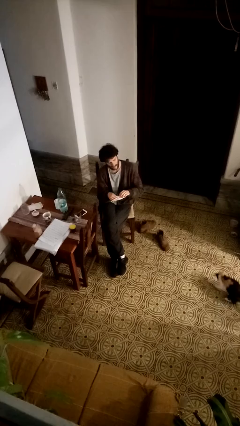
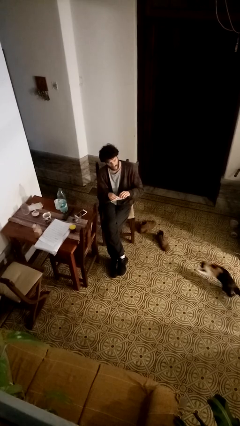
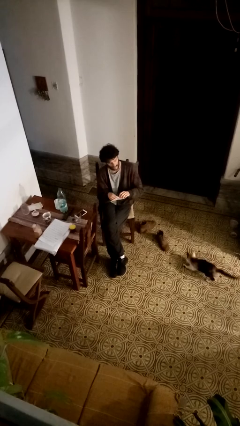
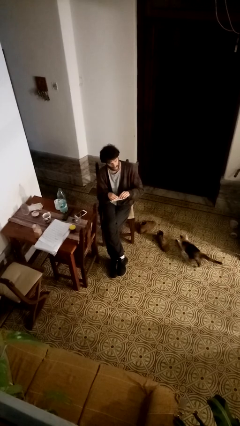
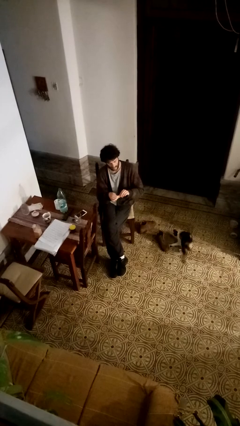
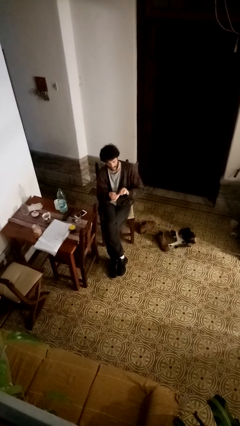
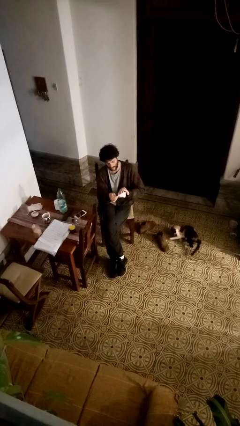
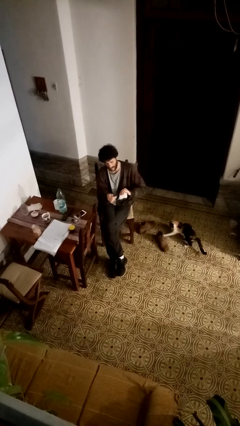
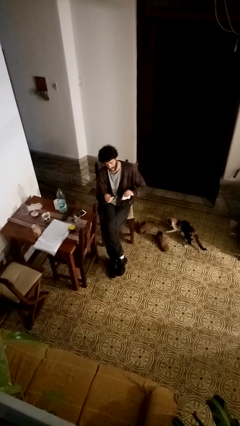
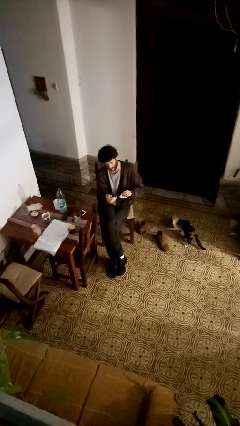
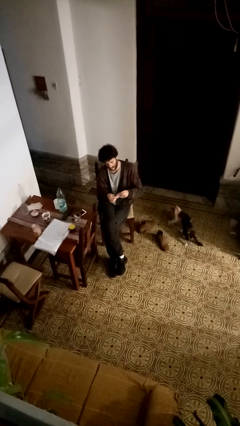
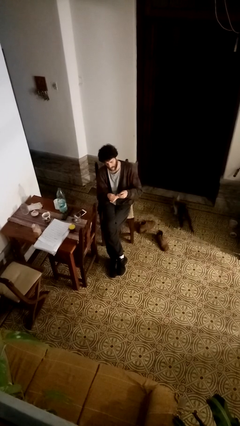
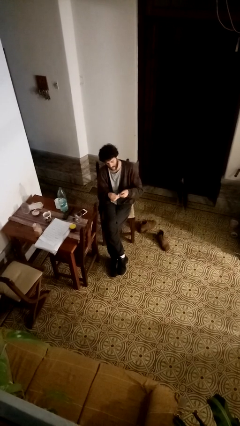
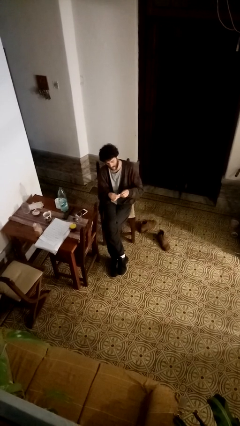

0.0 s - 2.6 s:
person tears paper

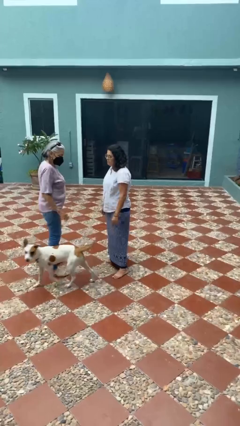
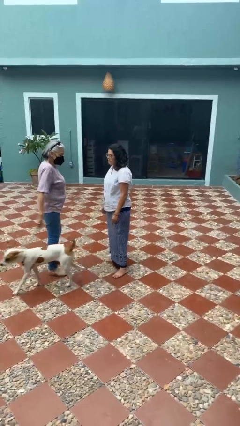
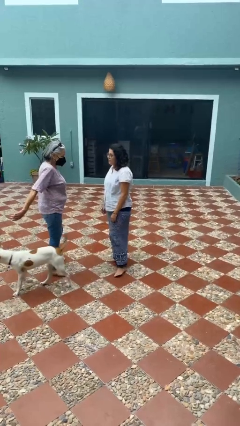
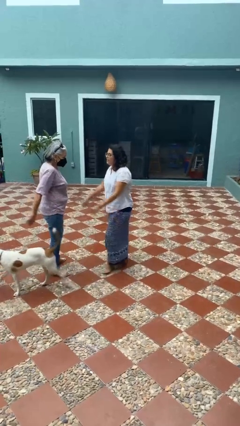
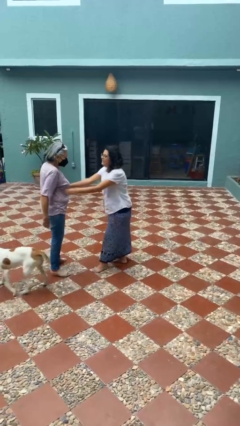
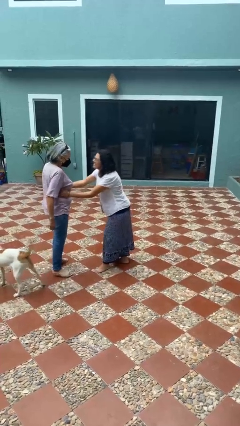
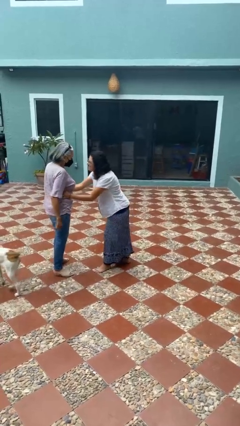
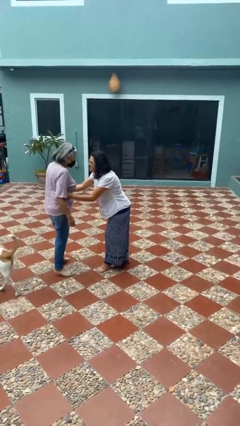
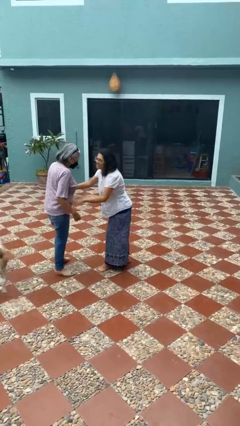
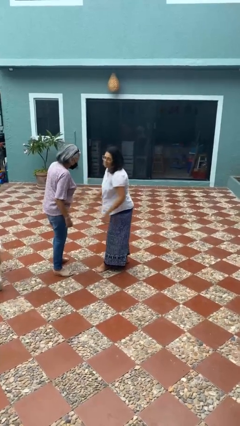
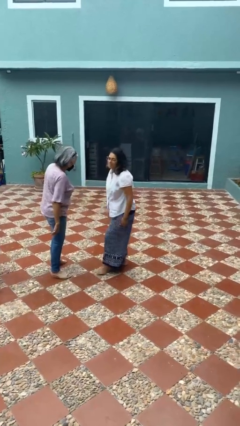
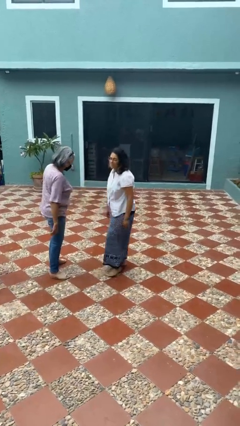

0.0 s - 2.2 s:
person tickles person

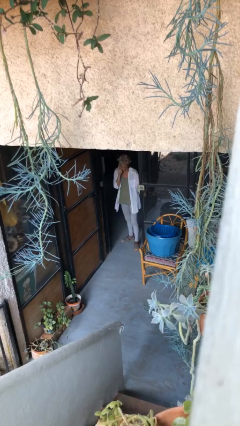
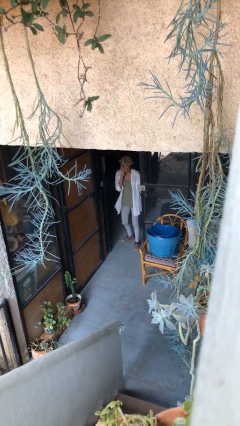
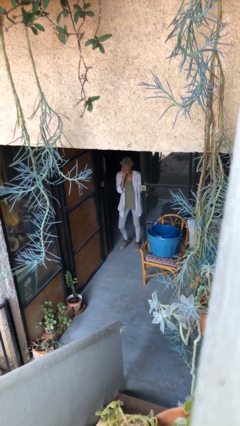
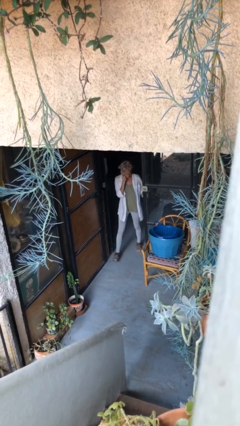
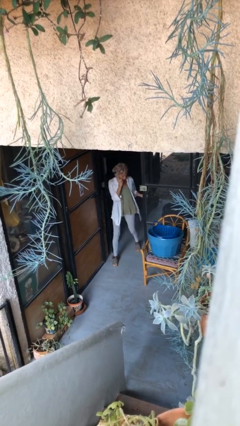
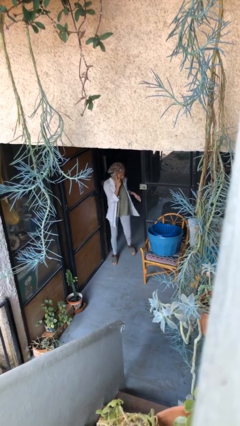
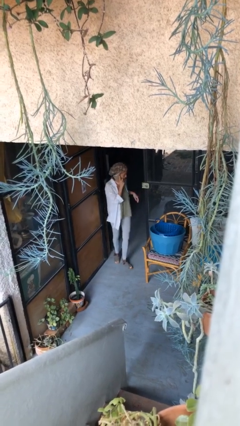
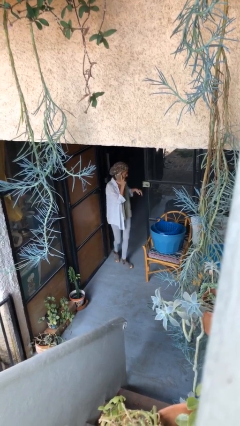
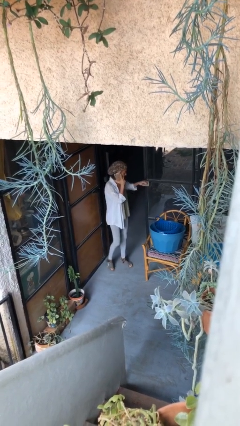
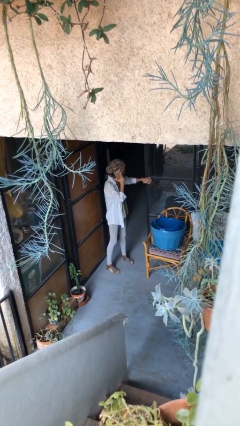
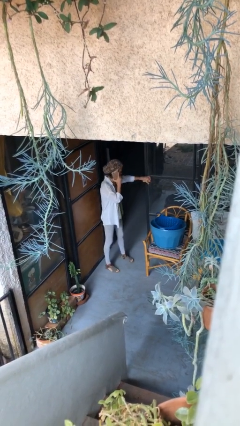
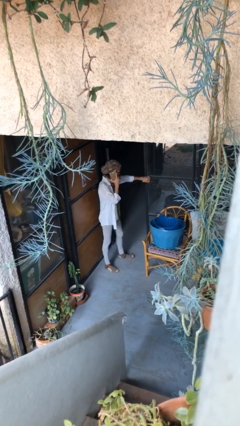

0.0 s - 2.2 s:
person enters scene through structure

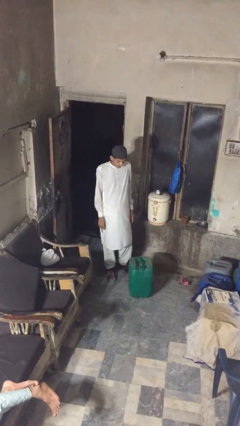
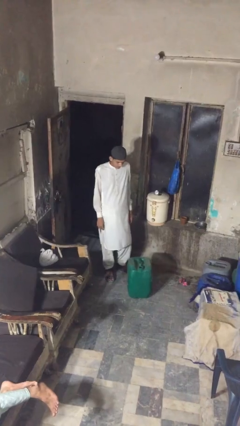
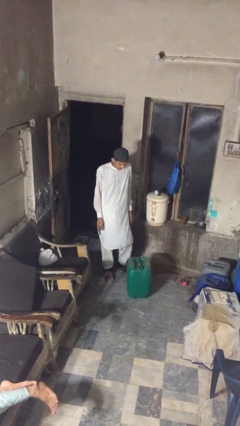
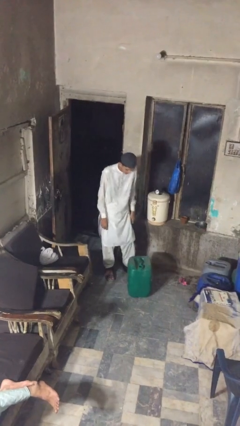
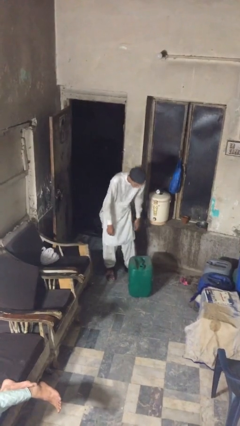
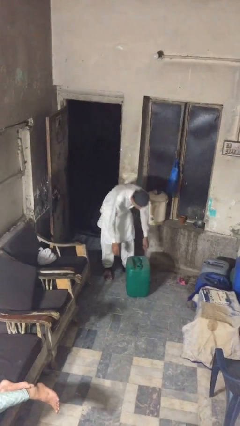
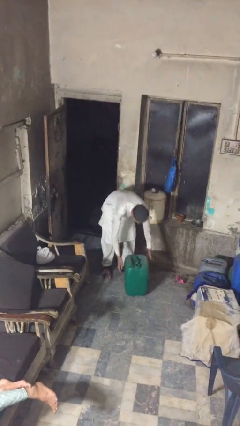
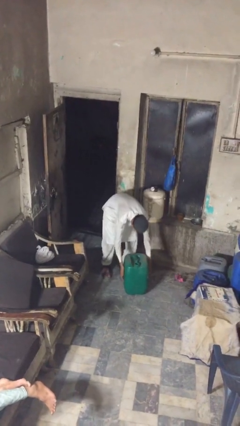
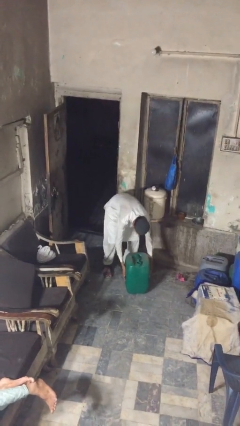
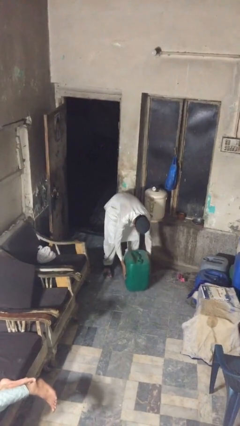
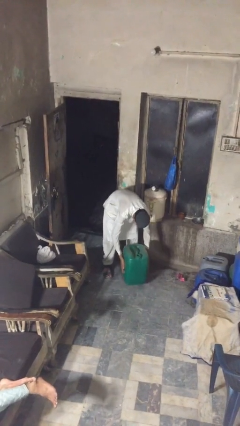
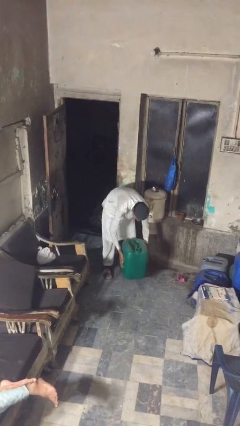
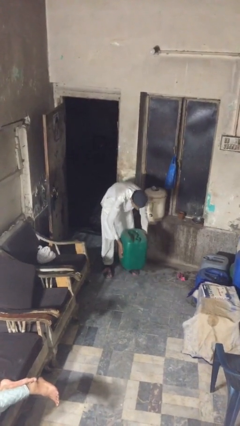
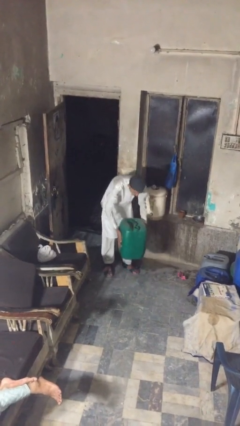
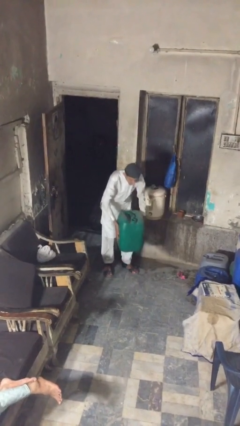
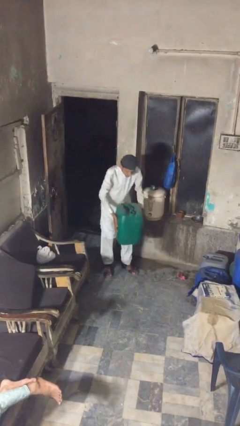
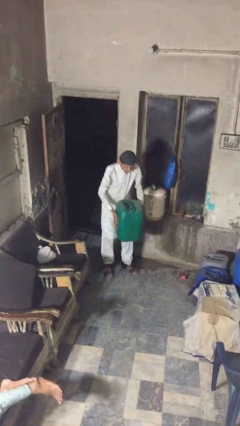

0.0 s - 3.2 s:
person picks up object from floor

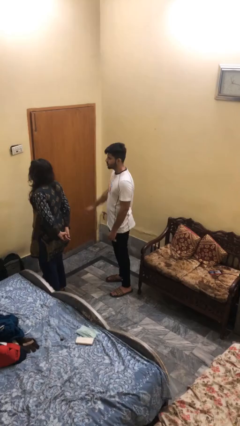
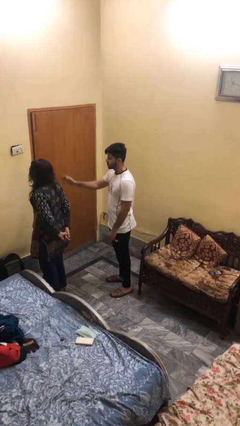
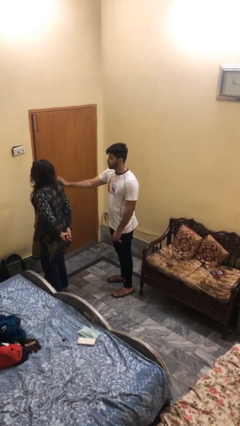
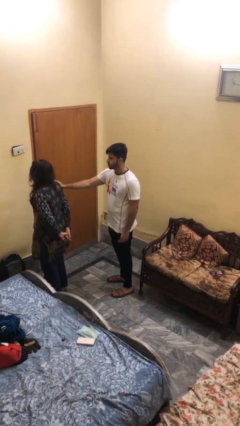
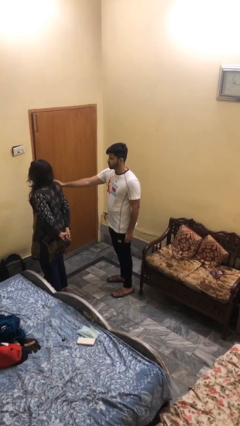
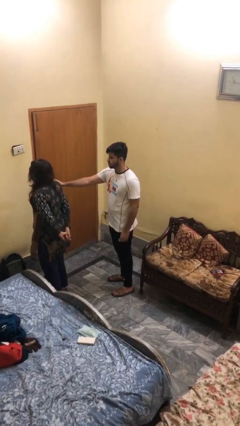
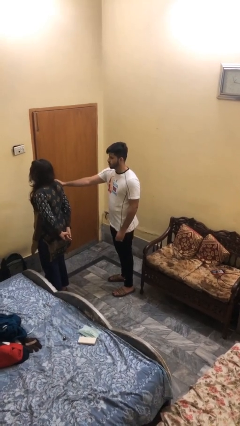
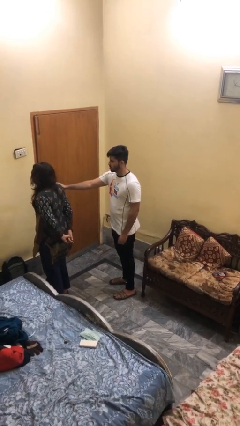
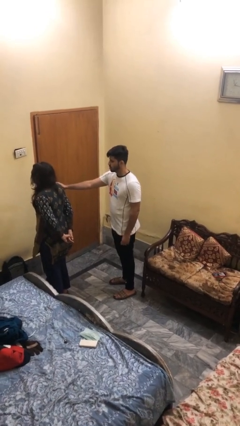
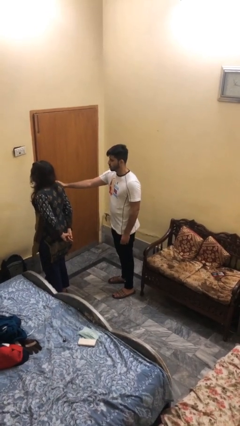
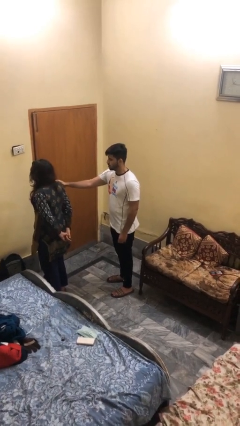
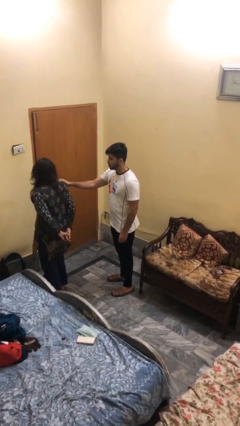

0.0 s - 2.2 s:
person grabs person by shoulder

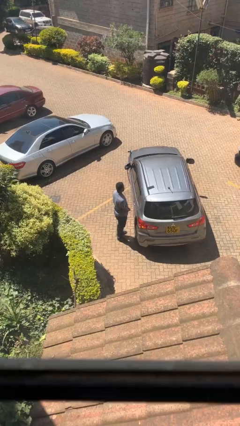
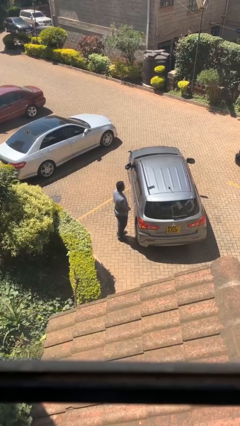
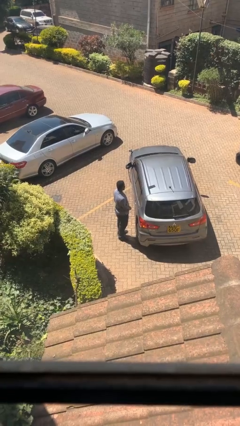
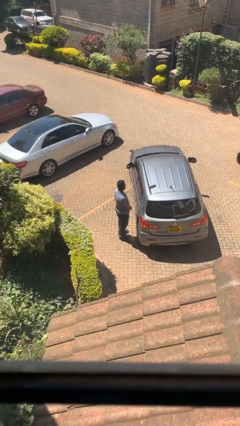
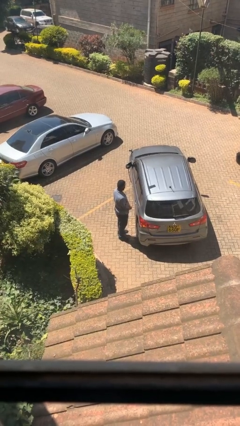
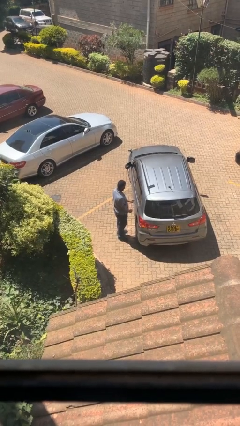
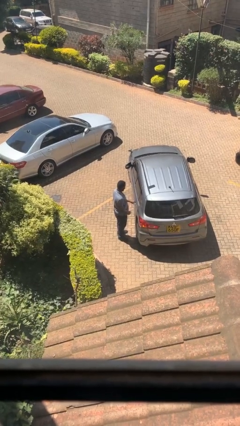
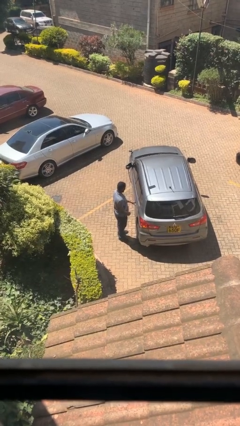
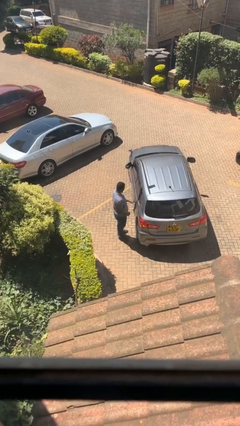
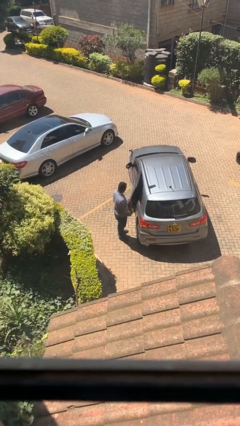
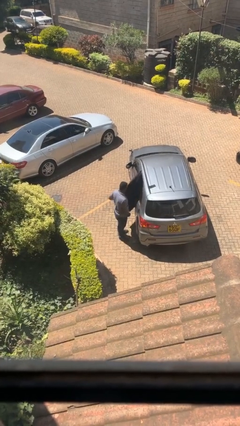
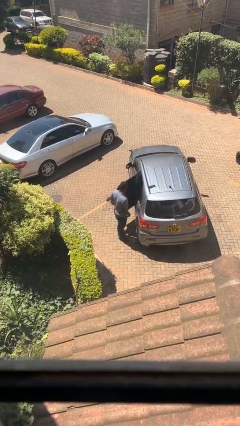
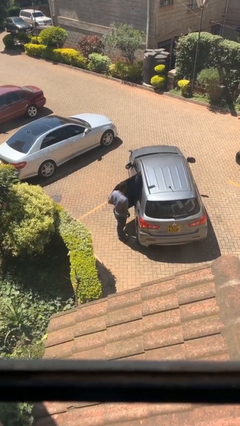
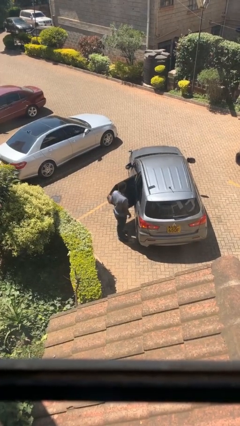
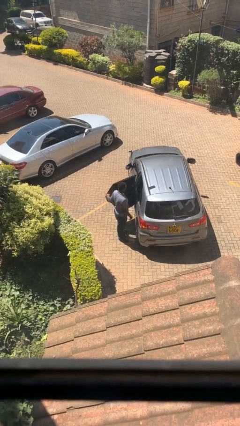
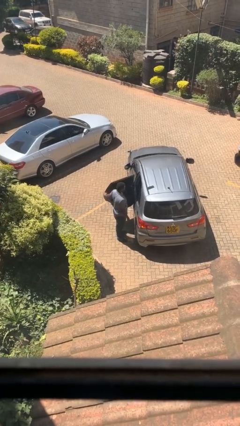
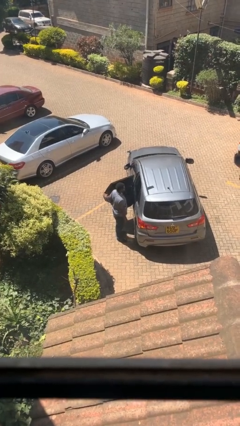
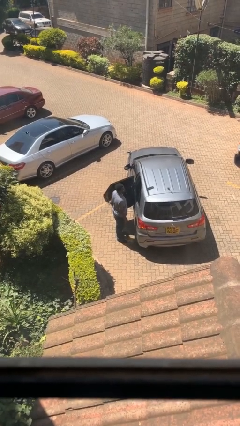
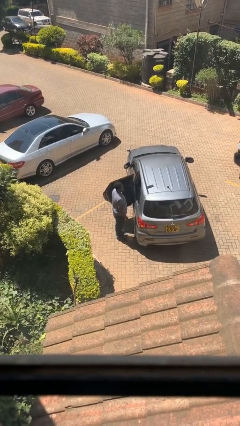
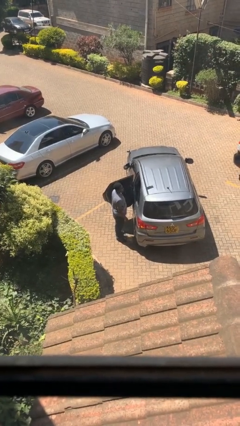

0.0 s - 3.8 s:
person opens car door

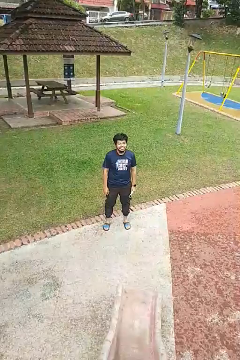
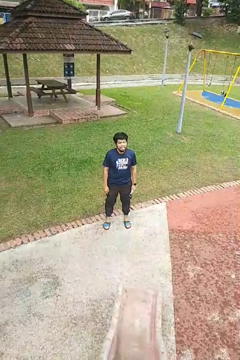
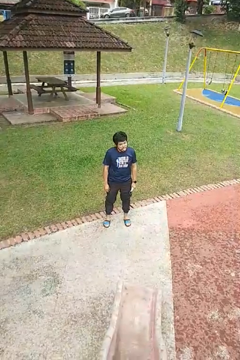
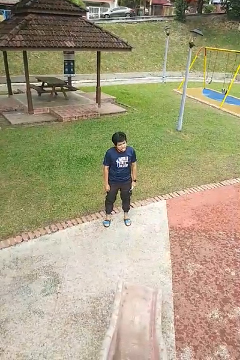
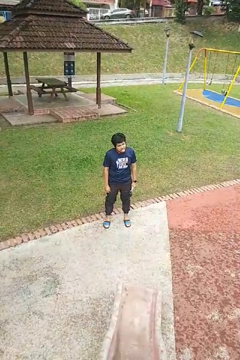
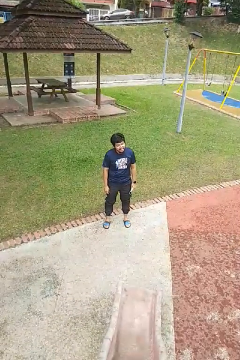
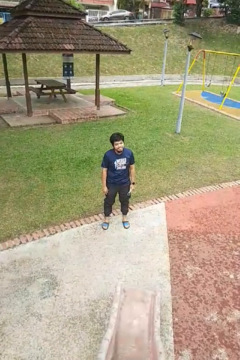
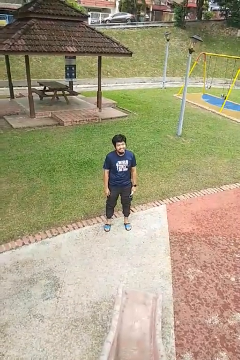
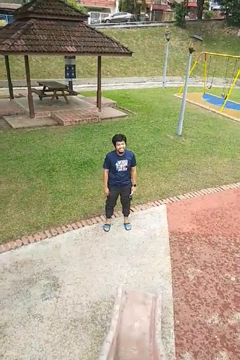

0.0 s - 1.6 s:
person sticks out tongue
